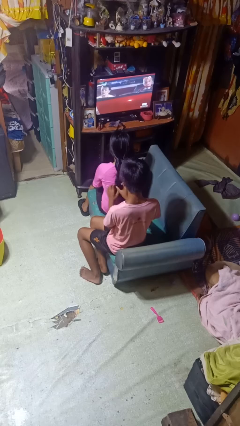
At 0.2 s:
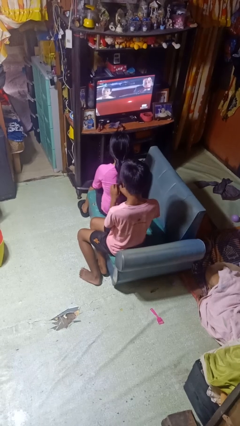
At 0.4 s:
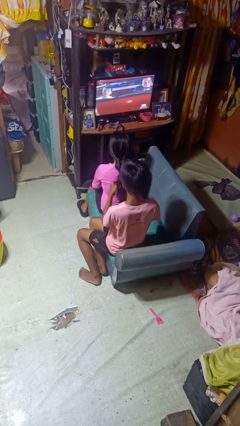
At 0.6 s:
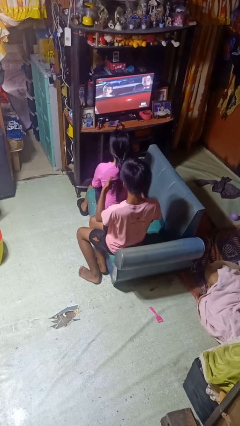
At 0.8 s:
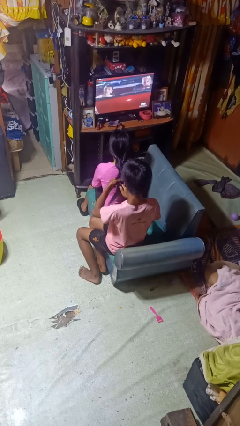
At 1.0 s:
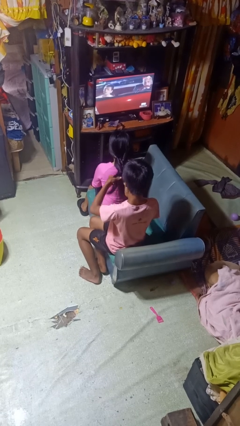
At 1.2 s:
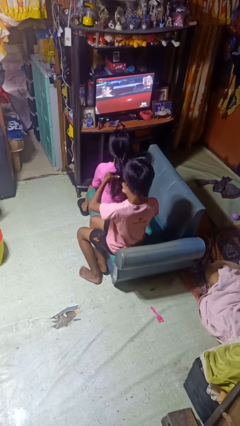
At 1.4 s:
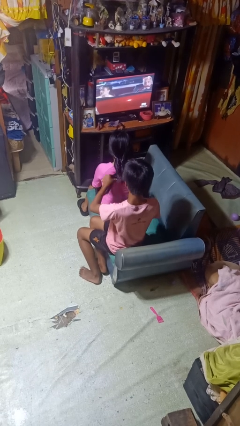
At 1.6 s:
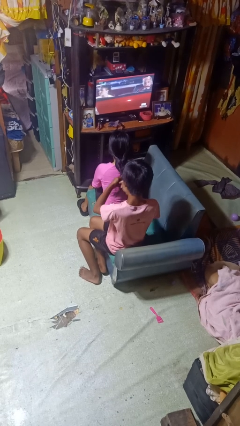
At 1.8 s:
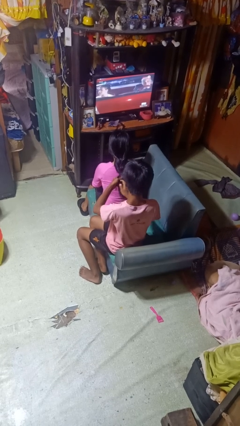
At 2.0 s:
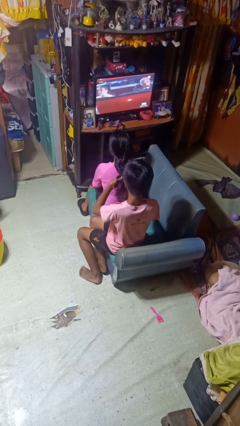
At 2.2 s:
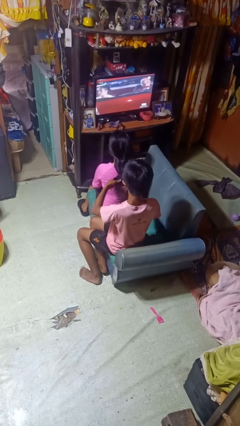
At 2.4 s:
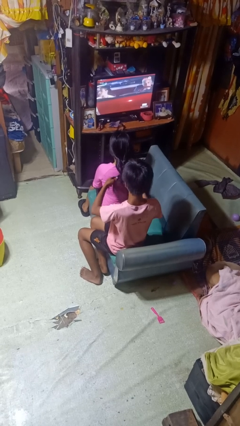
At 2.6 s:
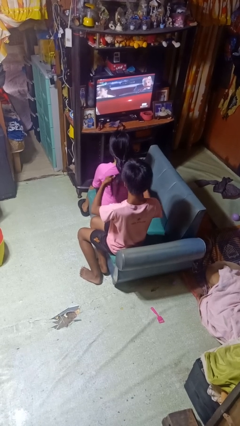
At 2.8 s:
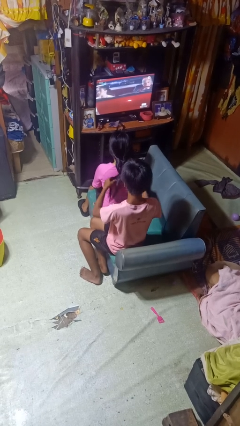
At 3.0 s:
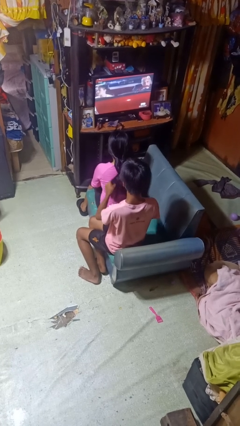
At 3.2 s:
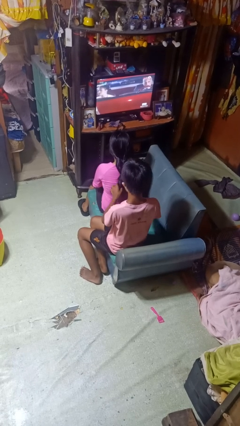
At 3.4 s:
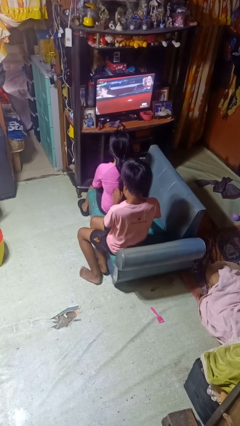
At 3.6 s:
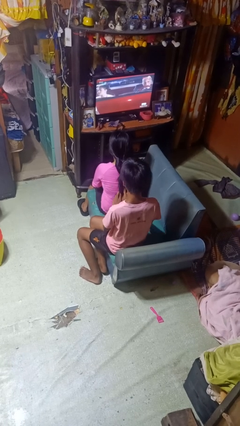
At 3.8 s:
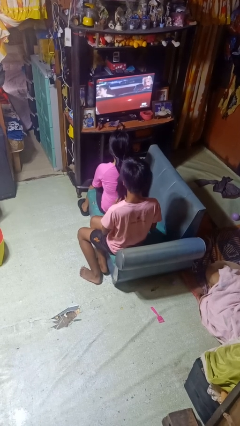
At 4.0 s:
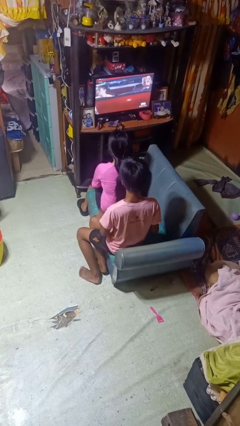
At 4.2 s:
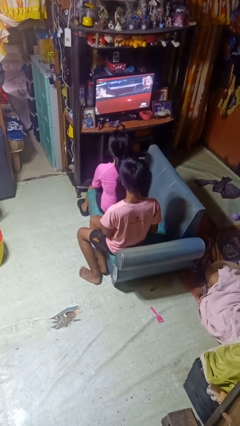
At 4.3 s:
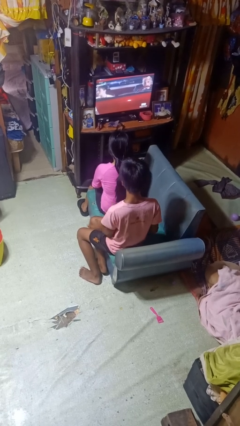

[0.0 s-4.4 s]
person braids hair of person

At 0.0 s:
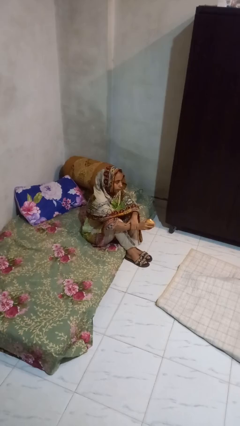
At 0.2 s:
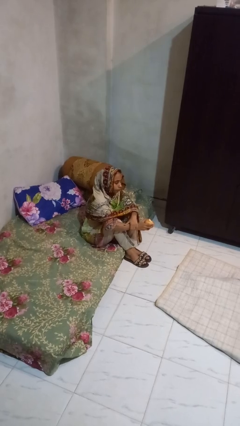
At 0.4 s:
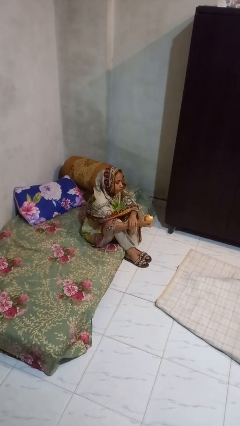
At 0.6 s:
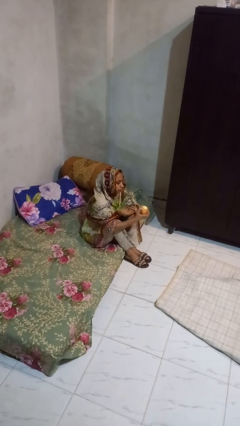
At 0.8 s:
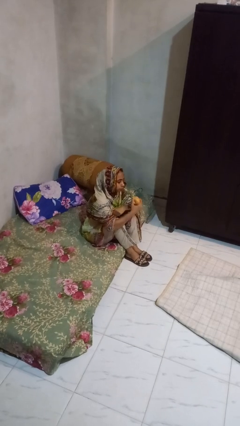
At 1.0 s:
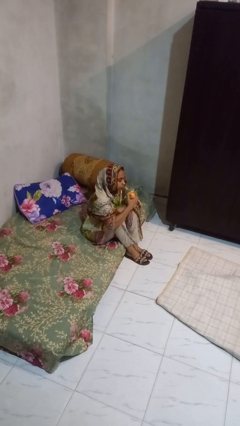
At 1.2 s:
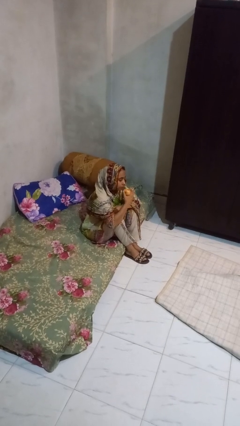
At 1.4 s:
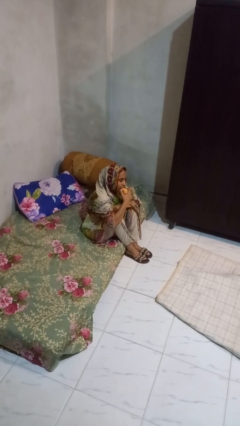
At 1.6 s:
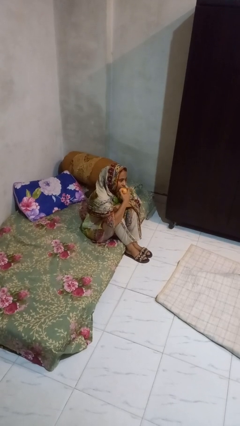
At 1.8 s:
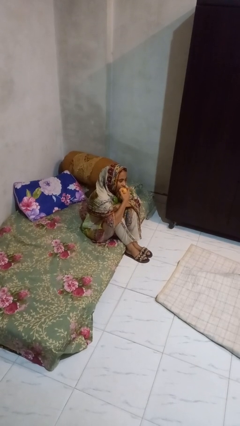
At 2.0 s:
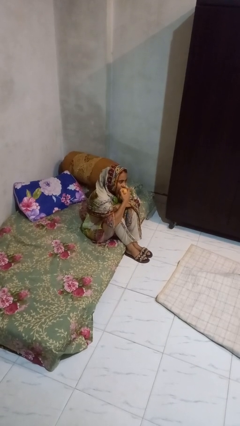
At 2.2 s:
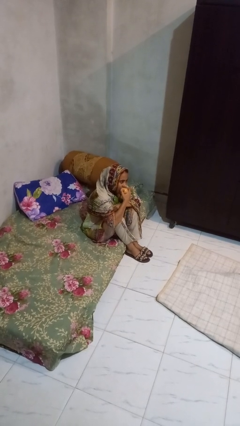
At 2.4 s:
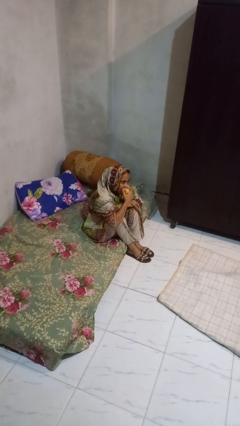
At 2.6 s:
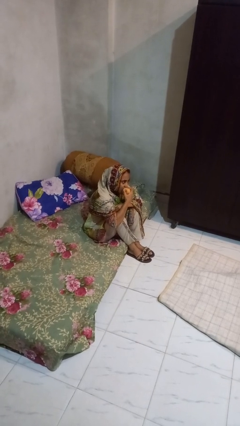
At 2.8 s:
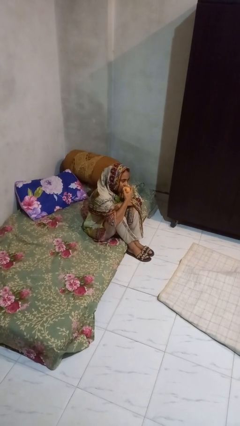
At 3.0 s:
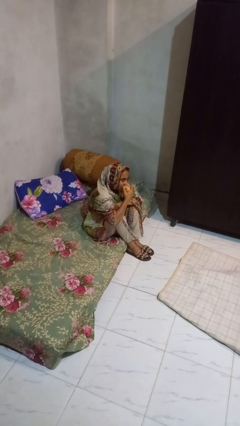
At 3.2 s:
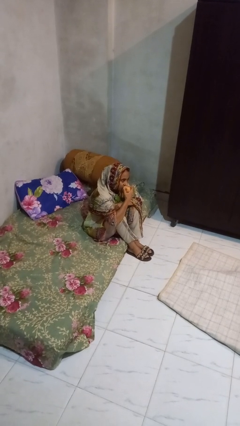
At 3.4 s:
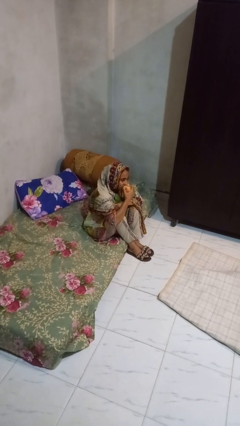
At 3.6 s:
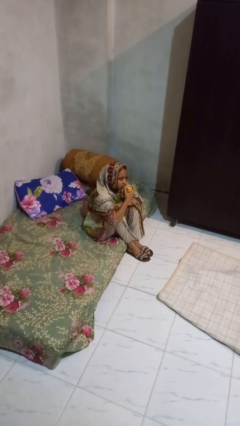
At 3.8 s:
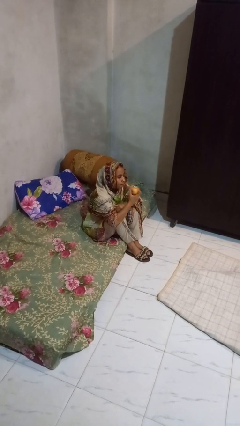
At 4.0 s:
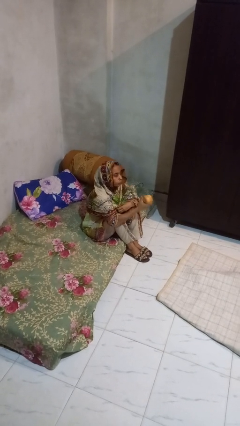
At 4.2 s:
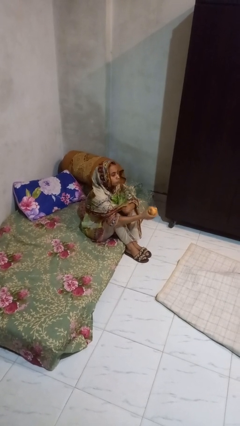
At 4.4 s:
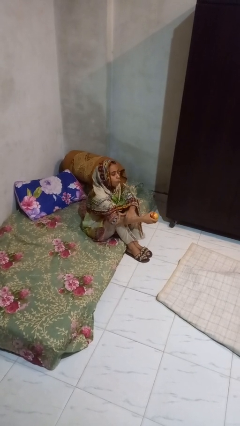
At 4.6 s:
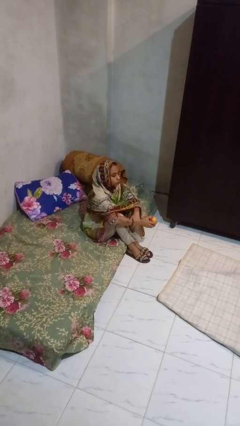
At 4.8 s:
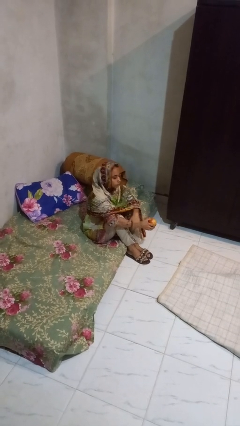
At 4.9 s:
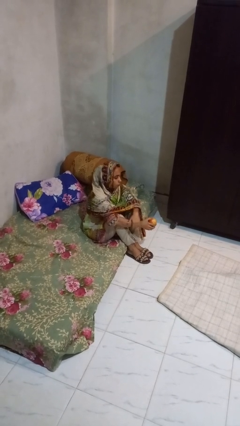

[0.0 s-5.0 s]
person eats apple

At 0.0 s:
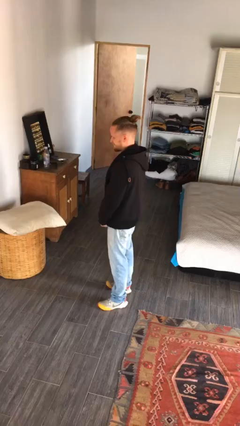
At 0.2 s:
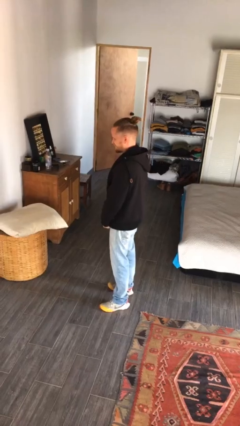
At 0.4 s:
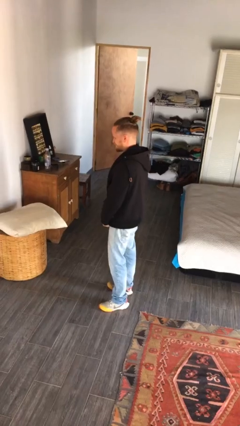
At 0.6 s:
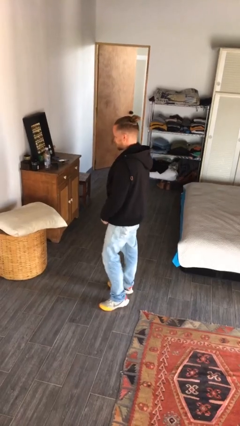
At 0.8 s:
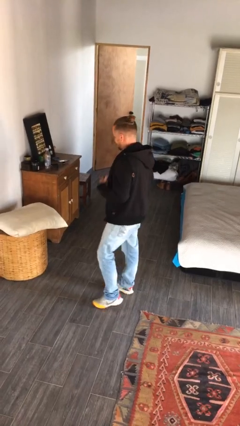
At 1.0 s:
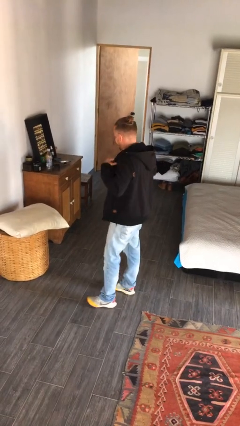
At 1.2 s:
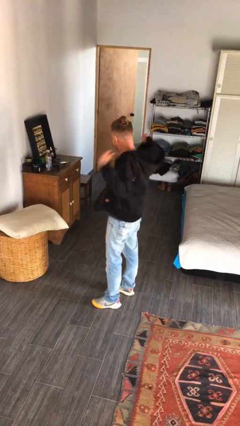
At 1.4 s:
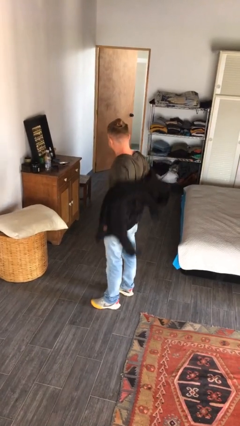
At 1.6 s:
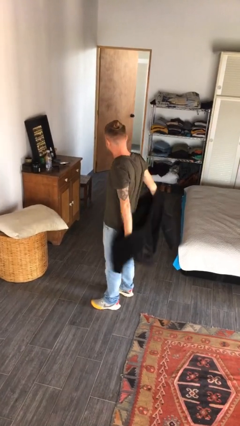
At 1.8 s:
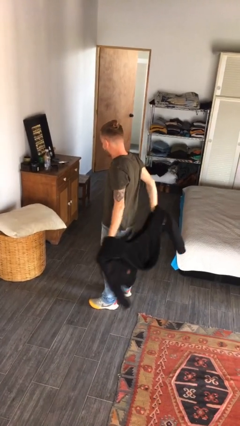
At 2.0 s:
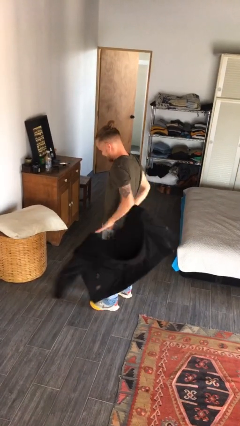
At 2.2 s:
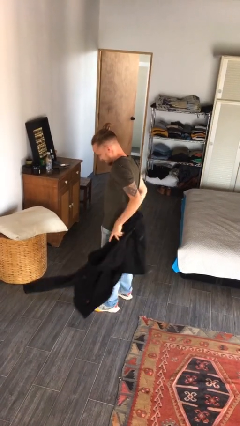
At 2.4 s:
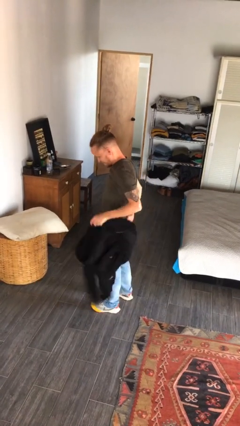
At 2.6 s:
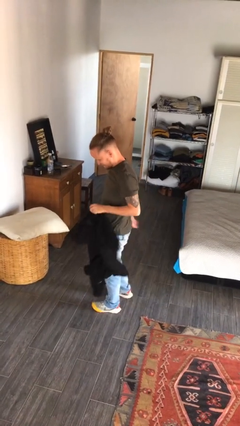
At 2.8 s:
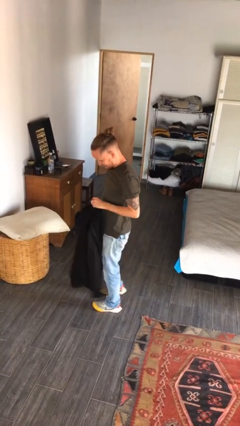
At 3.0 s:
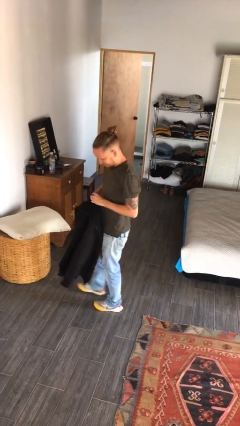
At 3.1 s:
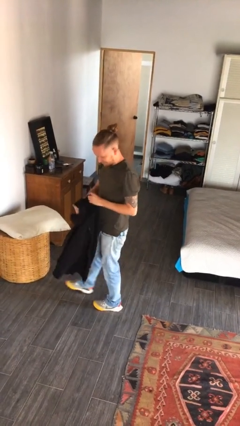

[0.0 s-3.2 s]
person takes off jacket

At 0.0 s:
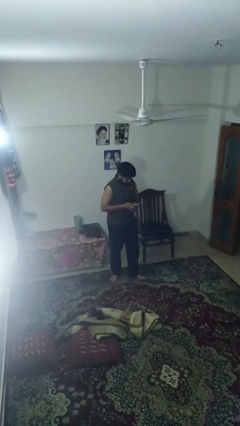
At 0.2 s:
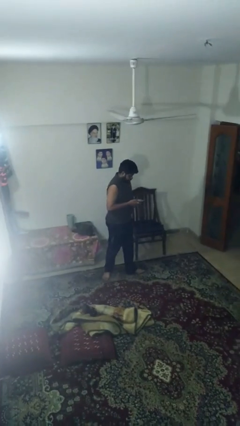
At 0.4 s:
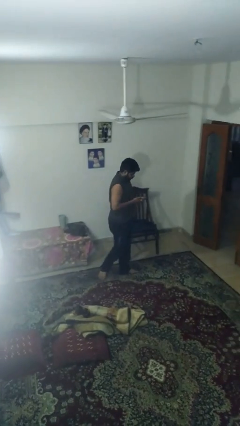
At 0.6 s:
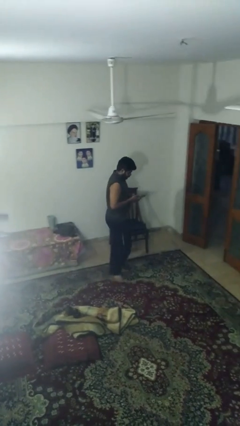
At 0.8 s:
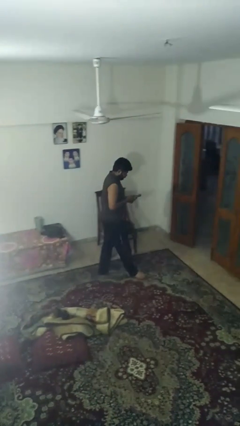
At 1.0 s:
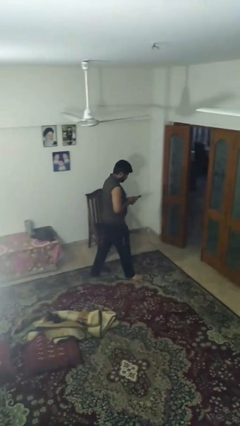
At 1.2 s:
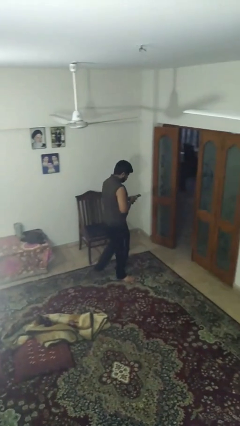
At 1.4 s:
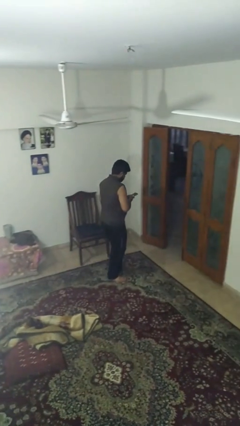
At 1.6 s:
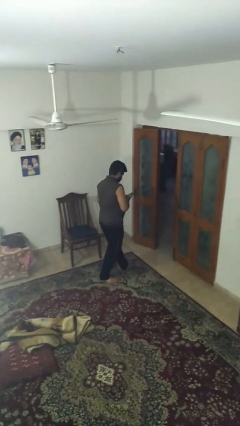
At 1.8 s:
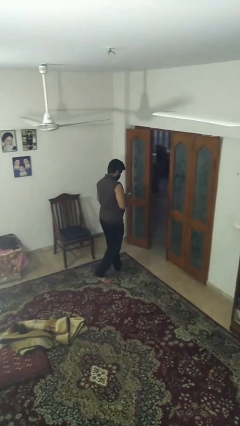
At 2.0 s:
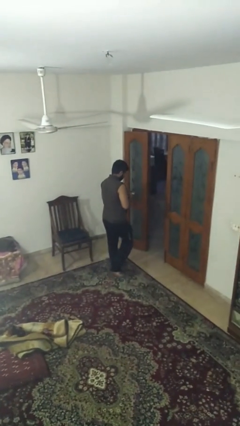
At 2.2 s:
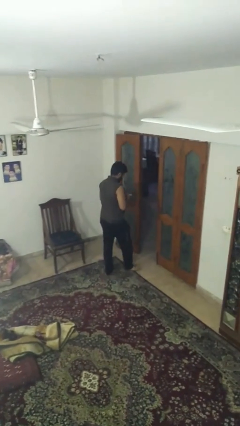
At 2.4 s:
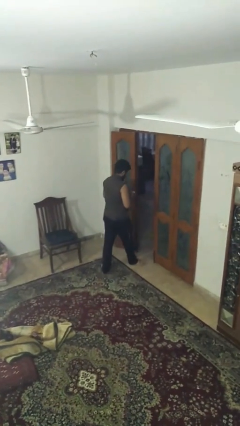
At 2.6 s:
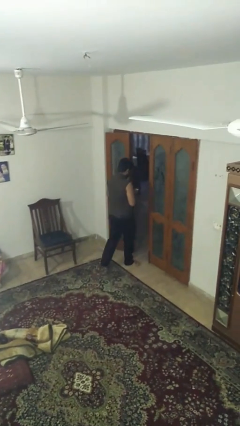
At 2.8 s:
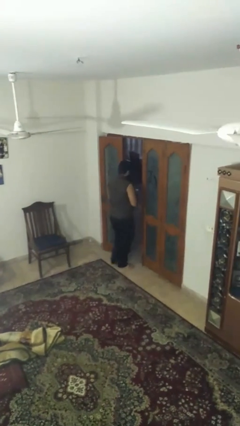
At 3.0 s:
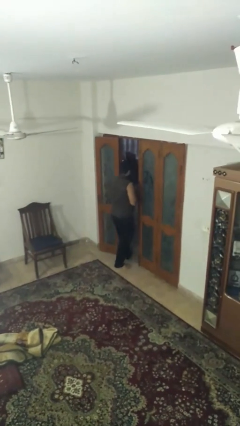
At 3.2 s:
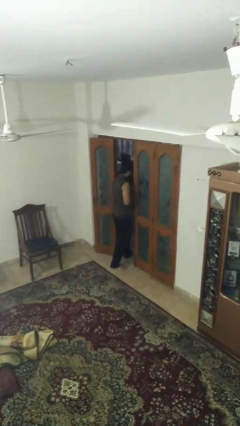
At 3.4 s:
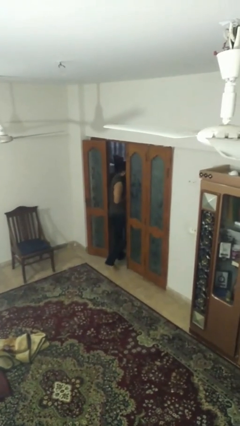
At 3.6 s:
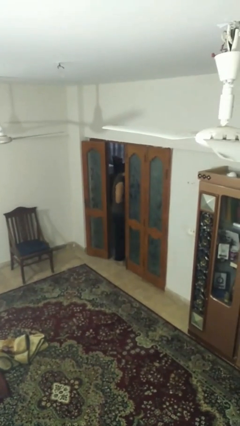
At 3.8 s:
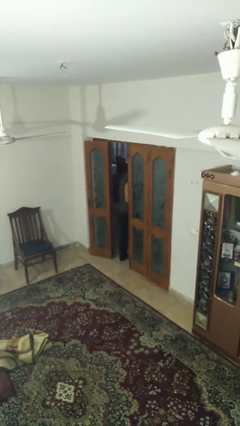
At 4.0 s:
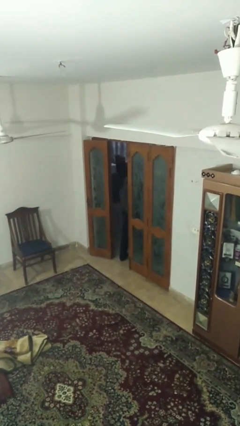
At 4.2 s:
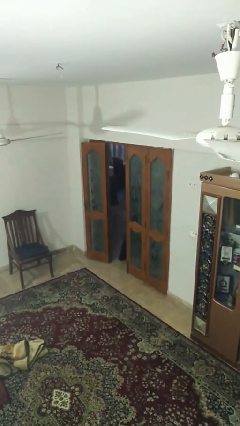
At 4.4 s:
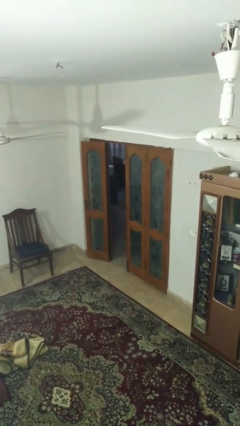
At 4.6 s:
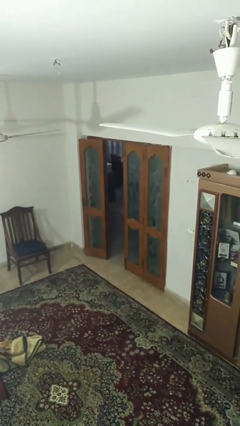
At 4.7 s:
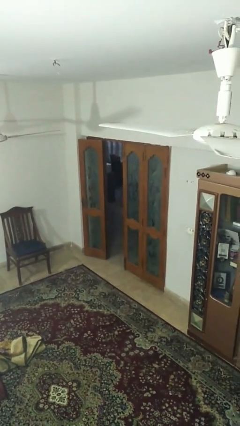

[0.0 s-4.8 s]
person exits scene through structure
